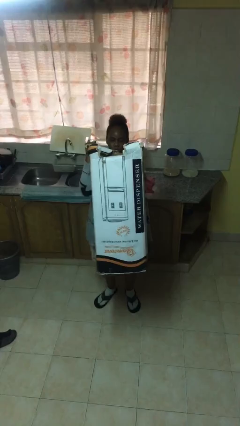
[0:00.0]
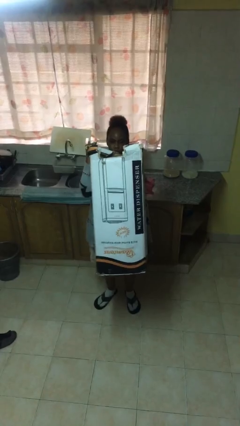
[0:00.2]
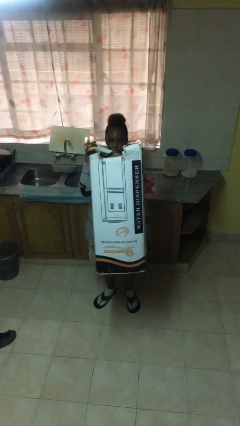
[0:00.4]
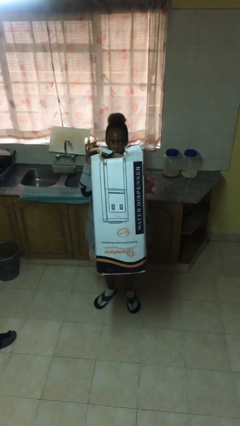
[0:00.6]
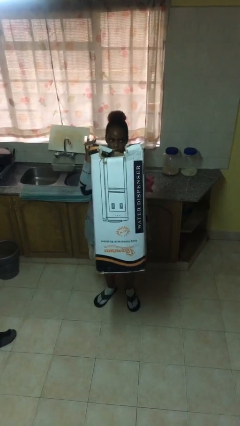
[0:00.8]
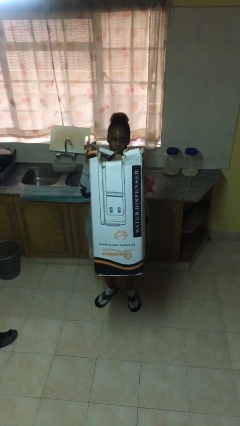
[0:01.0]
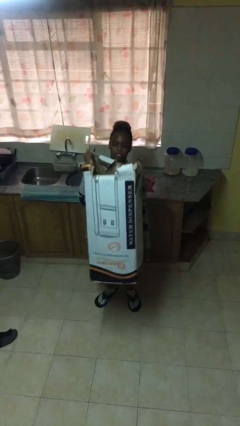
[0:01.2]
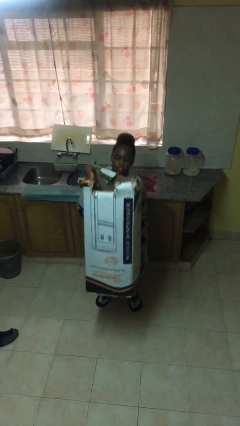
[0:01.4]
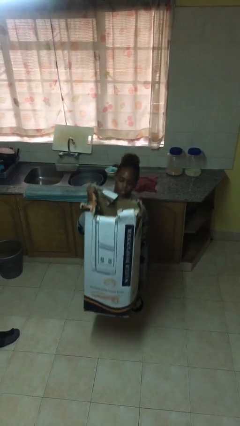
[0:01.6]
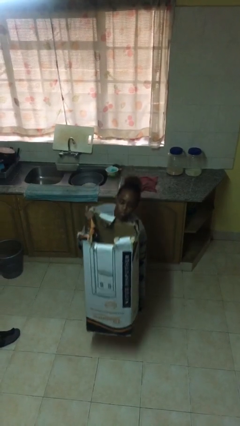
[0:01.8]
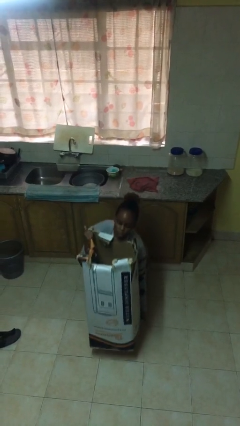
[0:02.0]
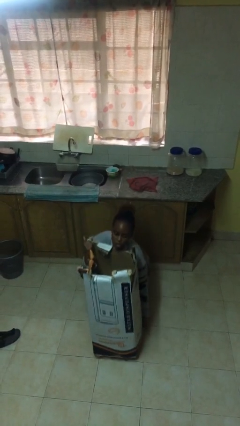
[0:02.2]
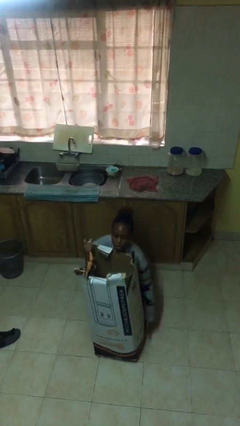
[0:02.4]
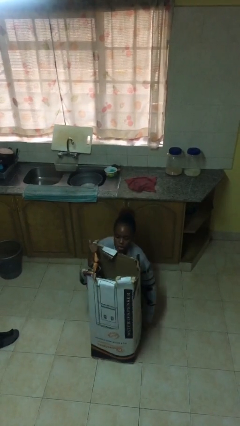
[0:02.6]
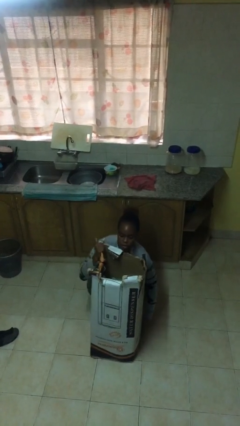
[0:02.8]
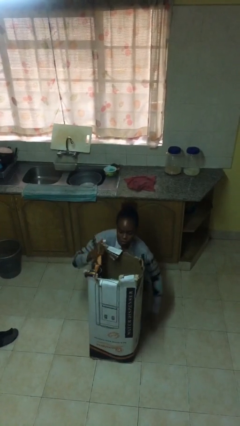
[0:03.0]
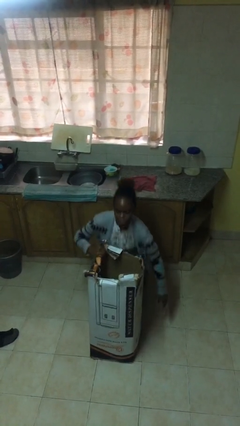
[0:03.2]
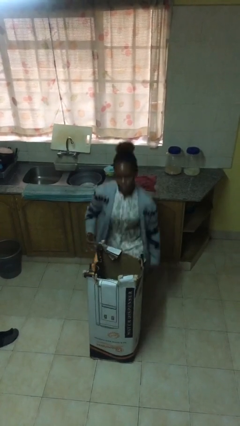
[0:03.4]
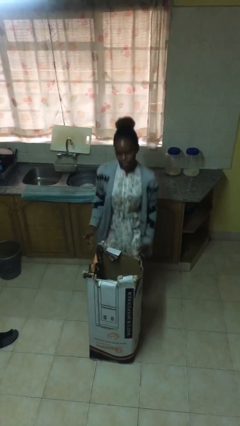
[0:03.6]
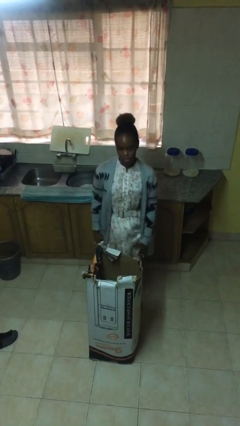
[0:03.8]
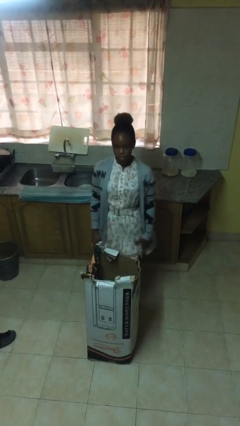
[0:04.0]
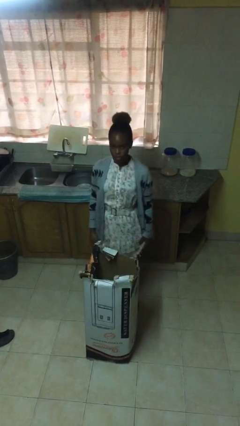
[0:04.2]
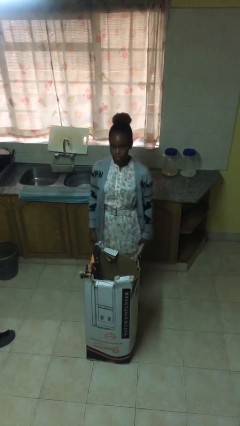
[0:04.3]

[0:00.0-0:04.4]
person puts down object on floor

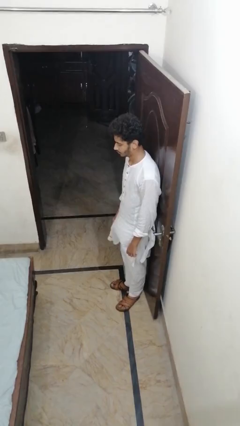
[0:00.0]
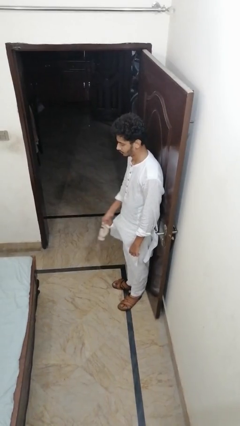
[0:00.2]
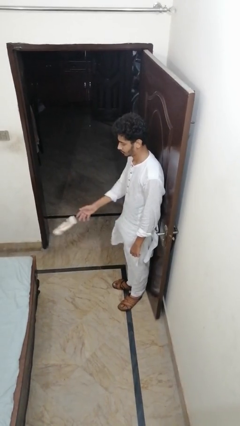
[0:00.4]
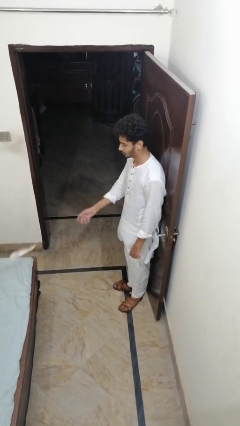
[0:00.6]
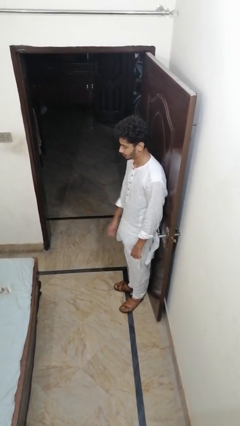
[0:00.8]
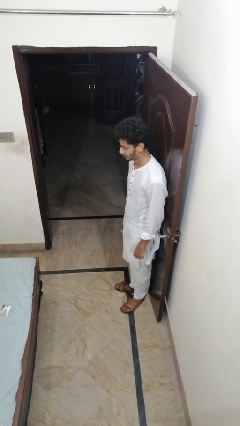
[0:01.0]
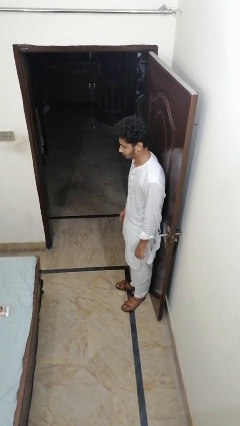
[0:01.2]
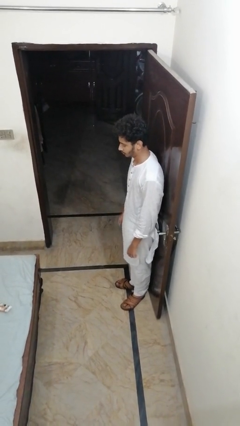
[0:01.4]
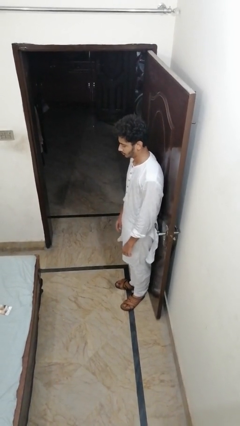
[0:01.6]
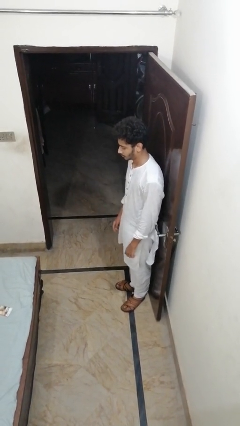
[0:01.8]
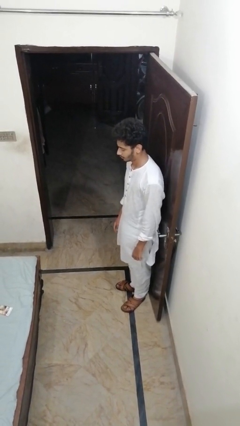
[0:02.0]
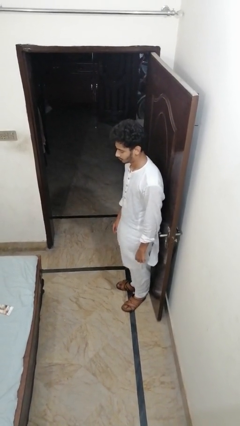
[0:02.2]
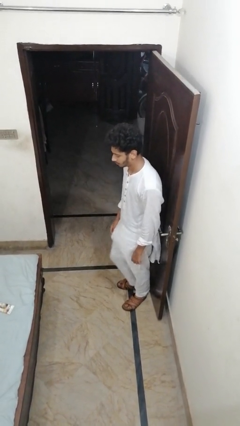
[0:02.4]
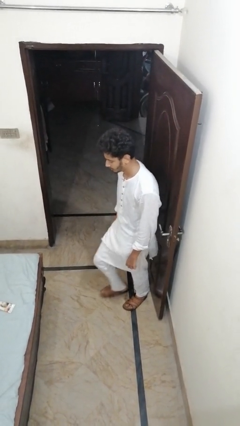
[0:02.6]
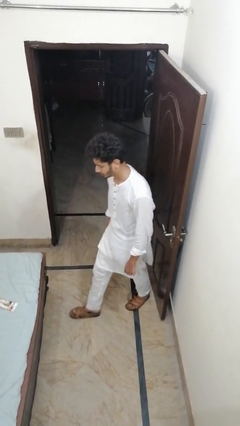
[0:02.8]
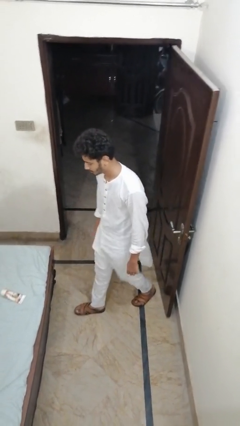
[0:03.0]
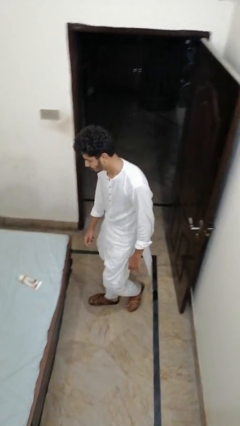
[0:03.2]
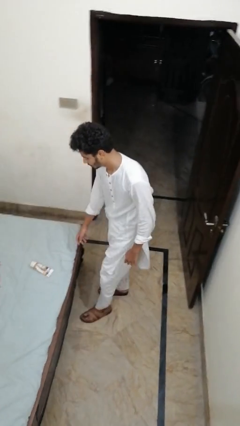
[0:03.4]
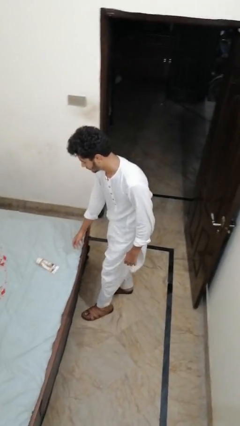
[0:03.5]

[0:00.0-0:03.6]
person throws object on bed

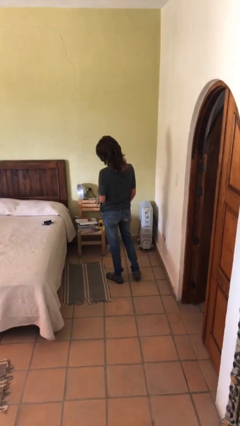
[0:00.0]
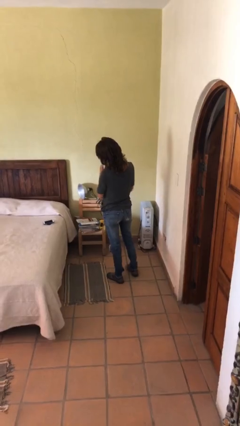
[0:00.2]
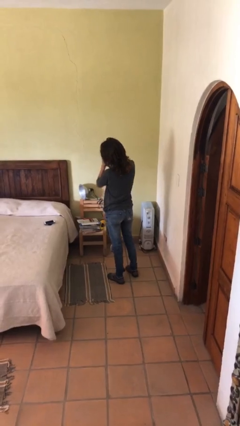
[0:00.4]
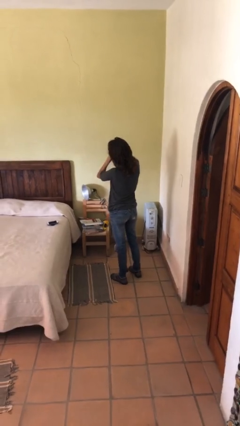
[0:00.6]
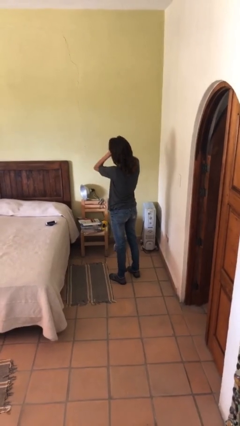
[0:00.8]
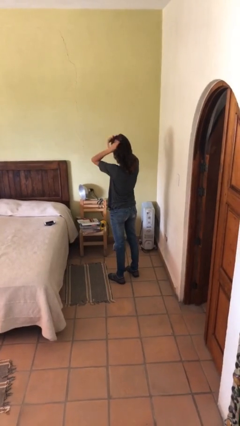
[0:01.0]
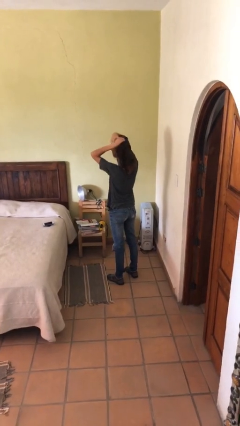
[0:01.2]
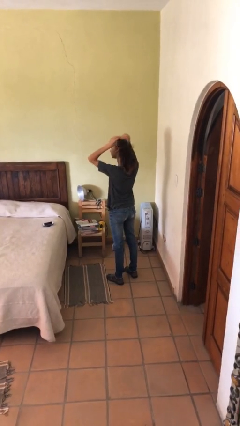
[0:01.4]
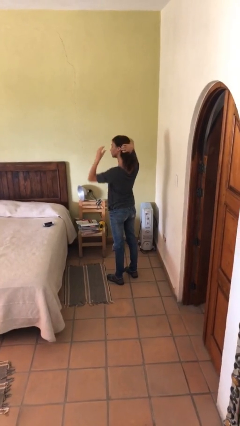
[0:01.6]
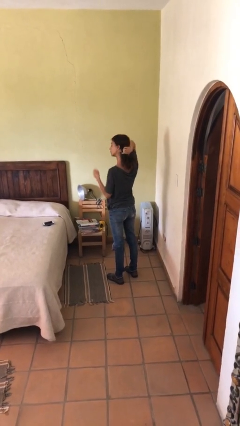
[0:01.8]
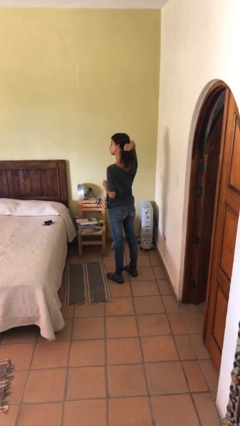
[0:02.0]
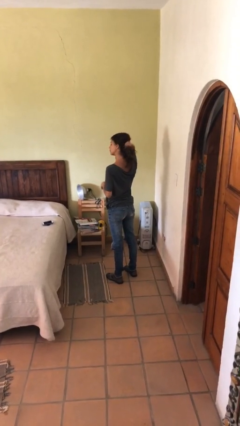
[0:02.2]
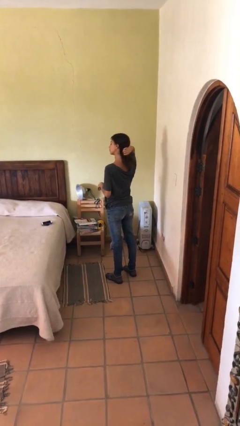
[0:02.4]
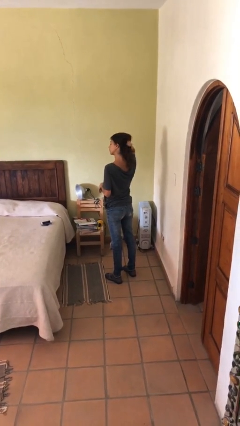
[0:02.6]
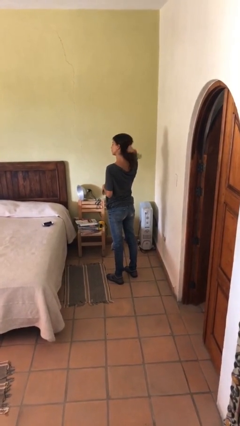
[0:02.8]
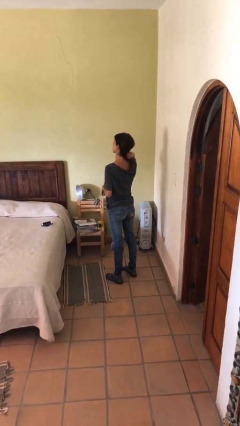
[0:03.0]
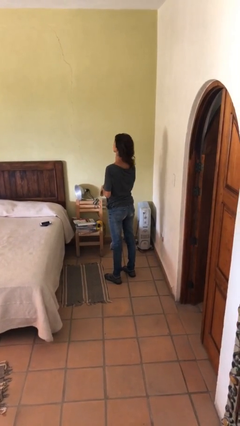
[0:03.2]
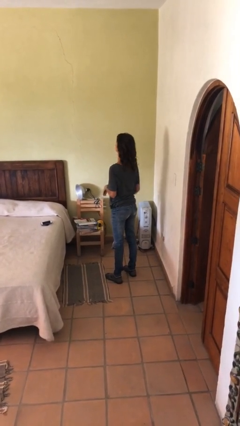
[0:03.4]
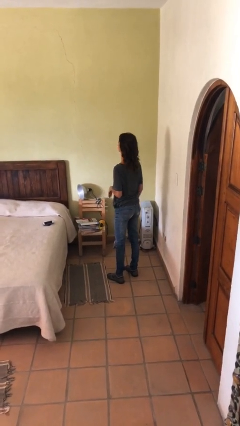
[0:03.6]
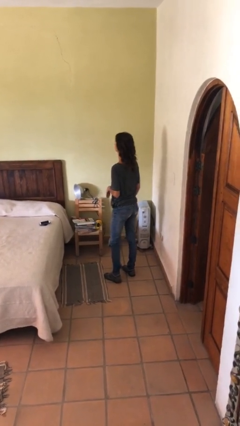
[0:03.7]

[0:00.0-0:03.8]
person strokes hair

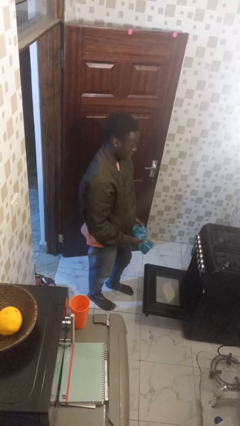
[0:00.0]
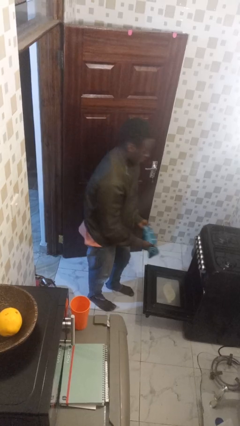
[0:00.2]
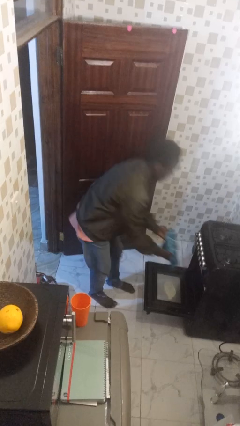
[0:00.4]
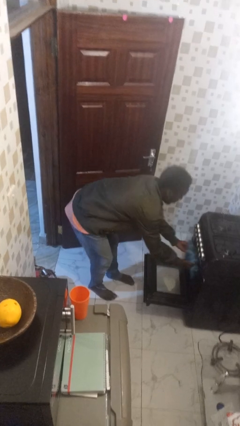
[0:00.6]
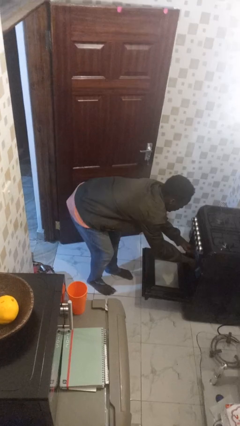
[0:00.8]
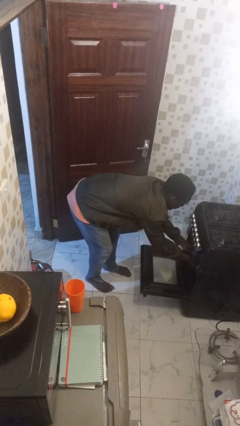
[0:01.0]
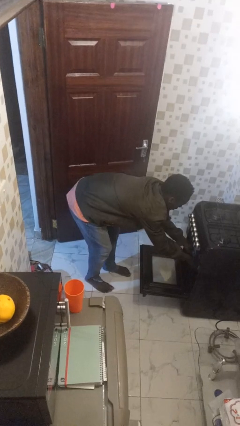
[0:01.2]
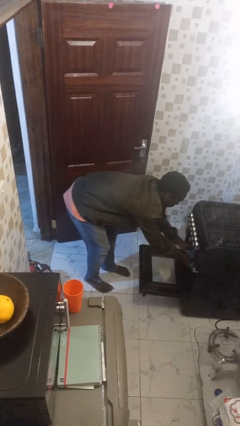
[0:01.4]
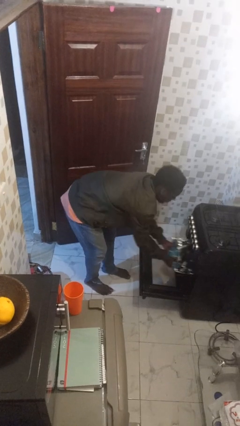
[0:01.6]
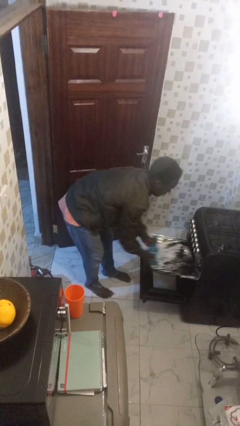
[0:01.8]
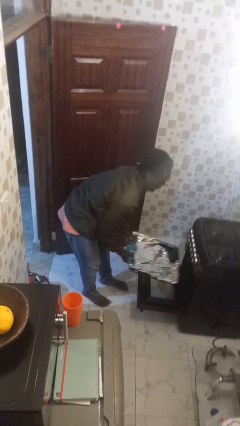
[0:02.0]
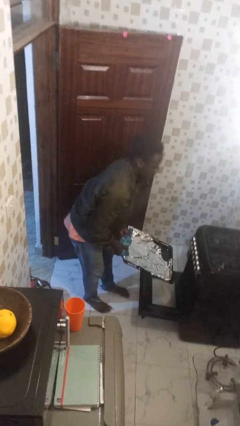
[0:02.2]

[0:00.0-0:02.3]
person takes object from oven

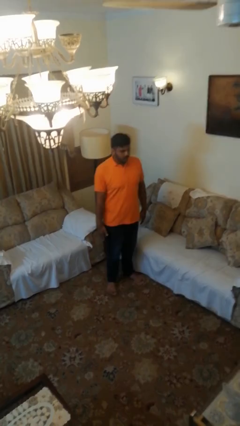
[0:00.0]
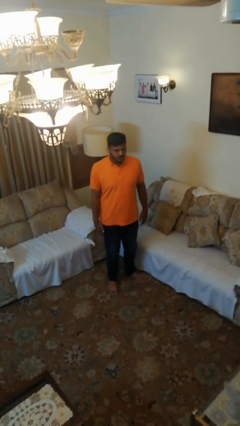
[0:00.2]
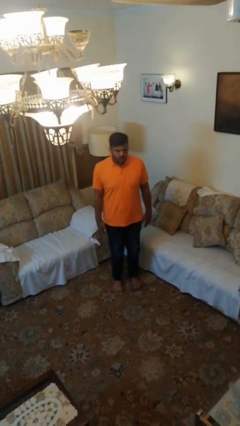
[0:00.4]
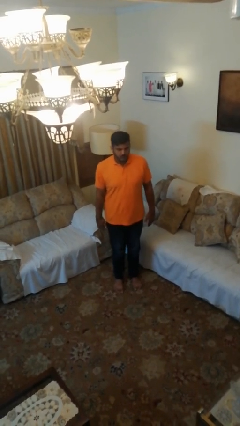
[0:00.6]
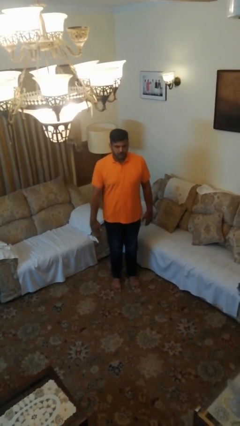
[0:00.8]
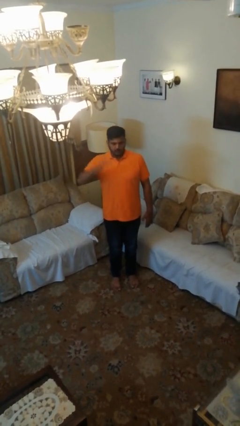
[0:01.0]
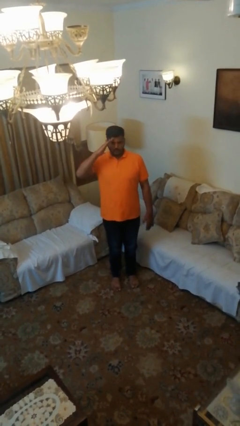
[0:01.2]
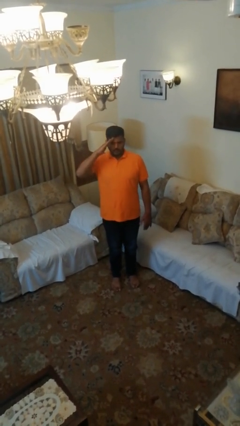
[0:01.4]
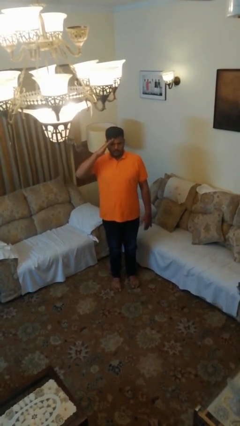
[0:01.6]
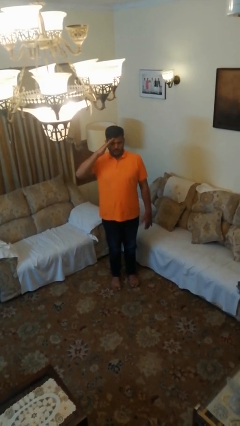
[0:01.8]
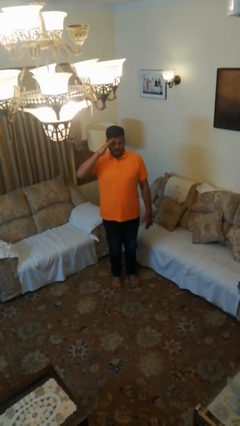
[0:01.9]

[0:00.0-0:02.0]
person salutes

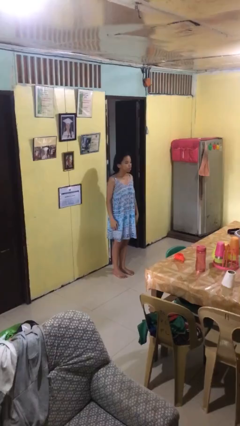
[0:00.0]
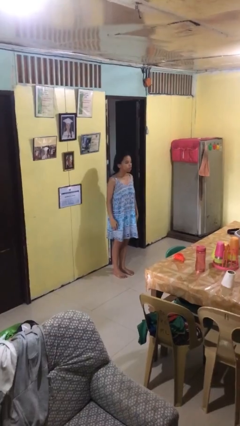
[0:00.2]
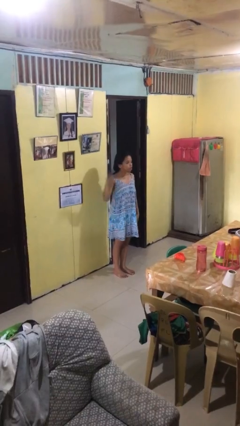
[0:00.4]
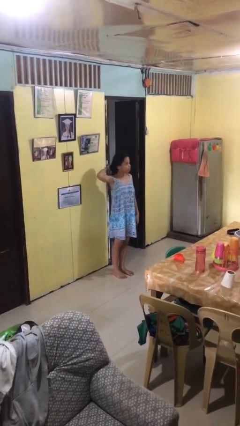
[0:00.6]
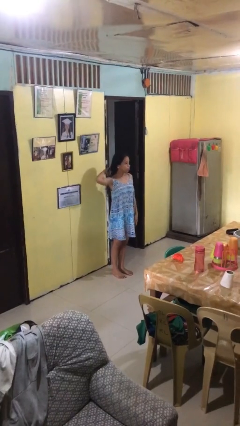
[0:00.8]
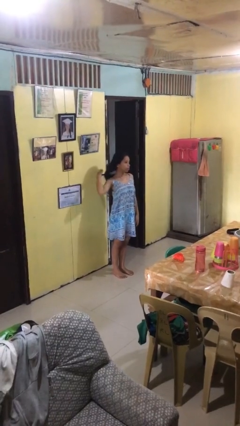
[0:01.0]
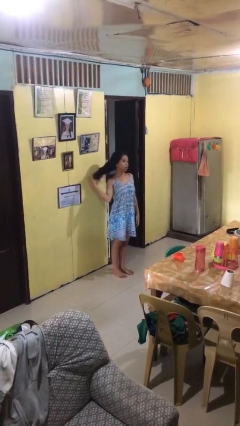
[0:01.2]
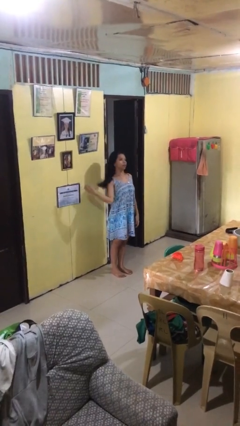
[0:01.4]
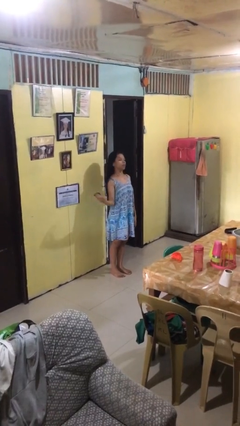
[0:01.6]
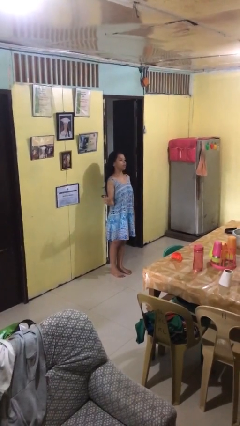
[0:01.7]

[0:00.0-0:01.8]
person takes off hairtie
